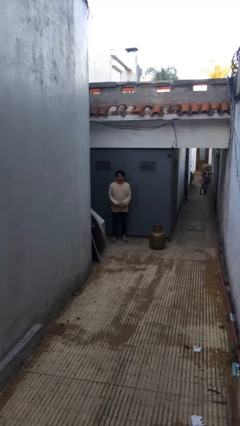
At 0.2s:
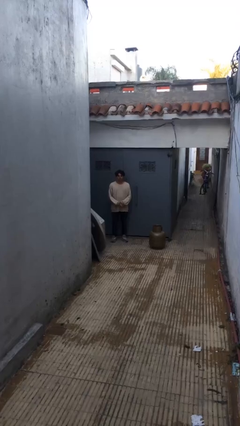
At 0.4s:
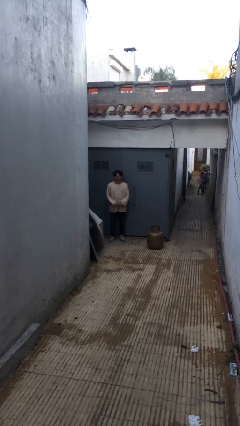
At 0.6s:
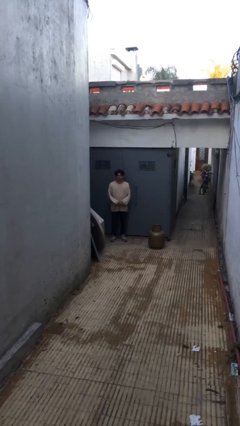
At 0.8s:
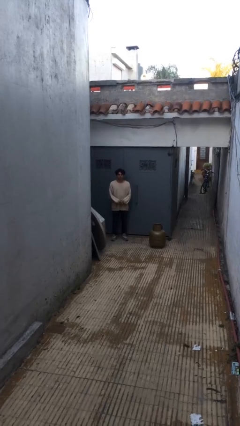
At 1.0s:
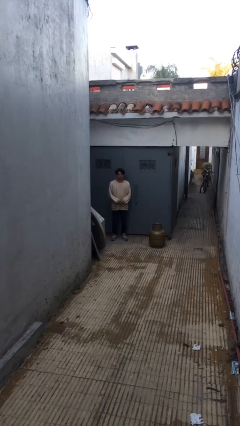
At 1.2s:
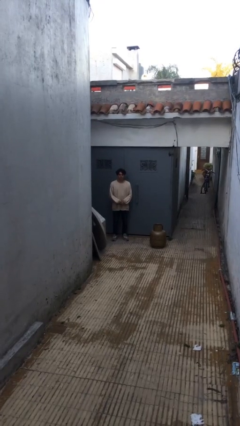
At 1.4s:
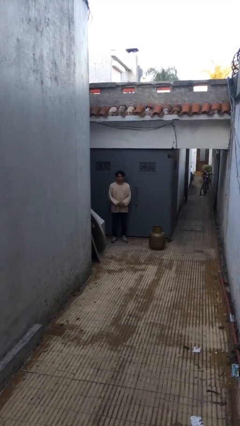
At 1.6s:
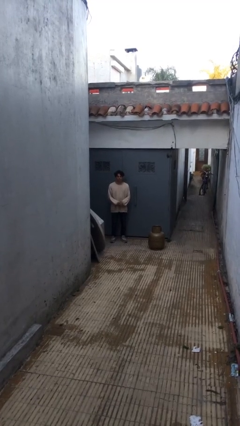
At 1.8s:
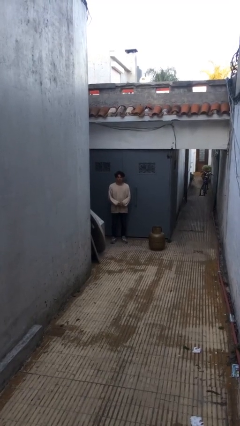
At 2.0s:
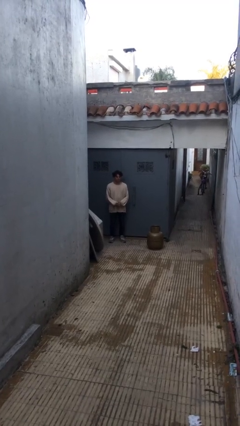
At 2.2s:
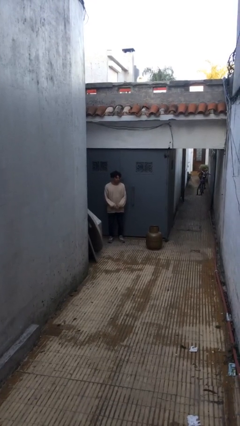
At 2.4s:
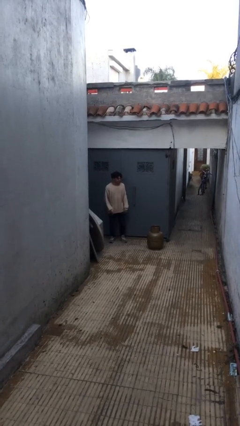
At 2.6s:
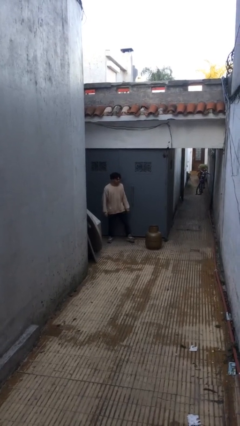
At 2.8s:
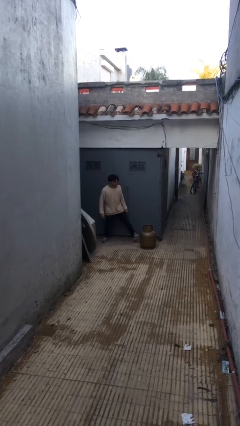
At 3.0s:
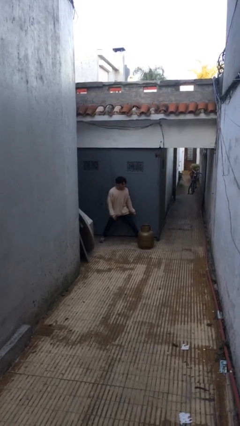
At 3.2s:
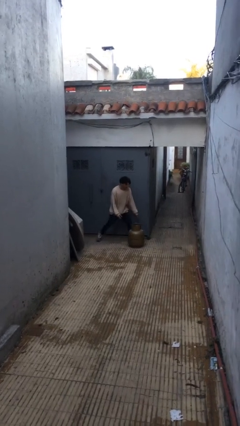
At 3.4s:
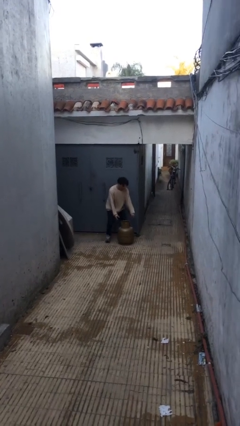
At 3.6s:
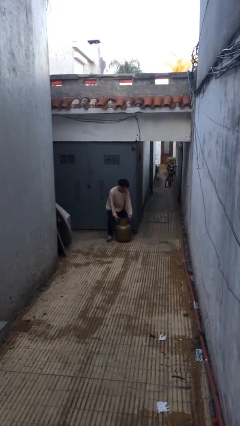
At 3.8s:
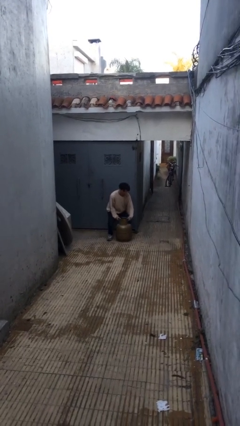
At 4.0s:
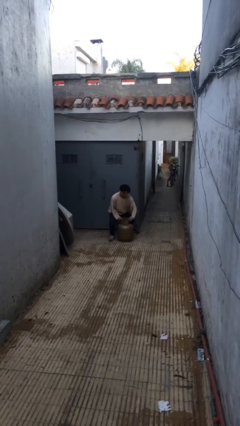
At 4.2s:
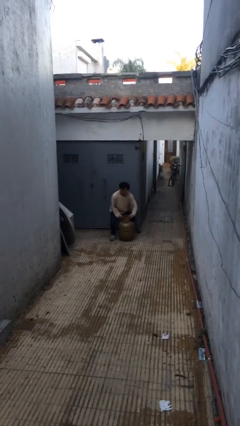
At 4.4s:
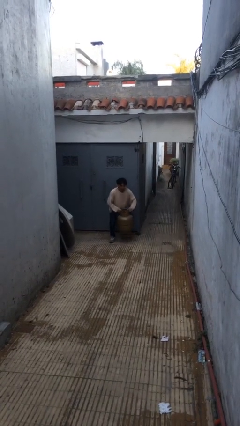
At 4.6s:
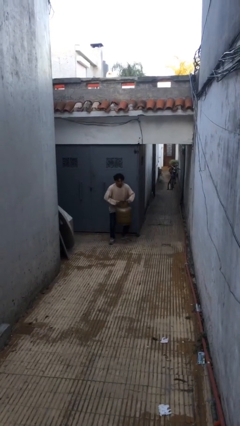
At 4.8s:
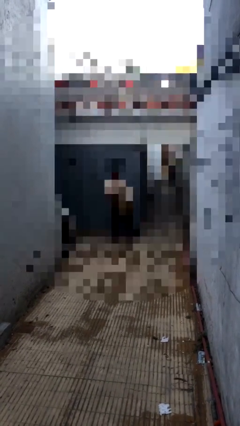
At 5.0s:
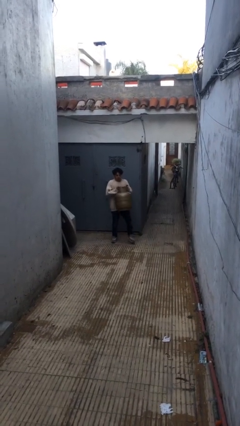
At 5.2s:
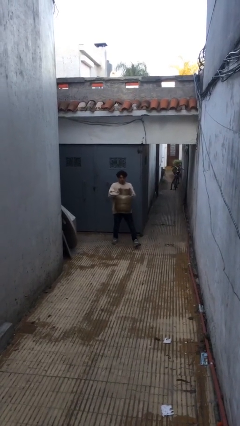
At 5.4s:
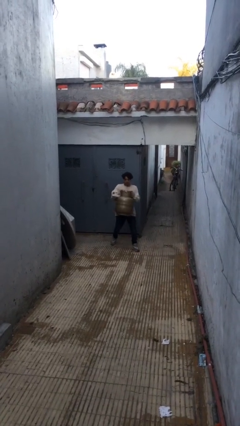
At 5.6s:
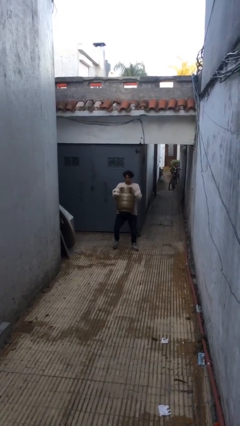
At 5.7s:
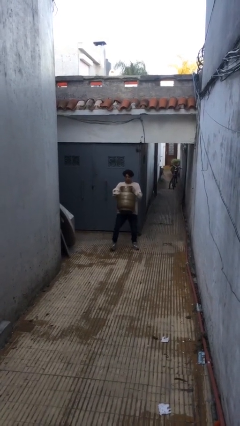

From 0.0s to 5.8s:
person picks up object from floor

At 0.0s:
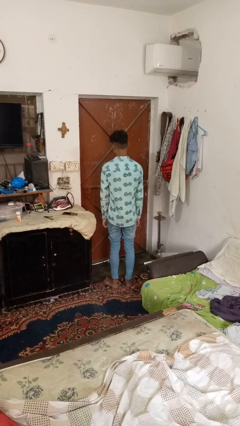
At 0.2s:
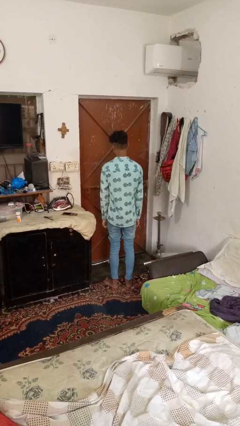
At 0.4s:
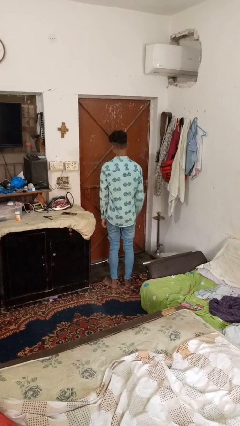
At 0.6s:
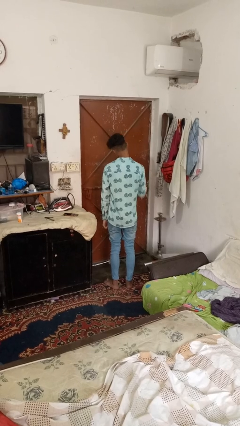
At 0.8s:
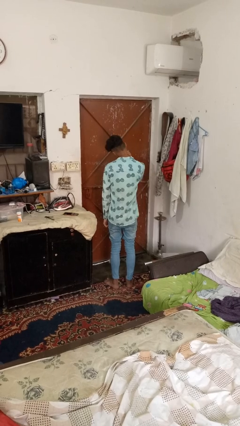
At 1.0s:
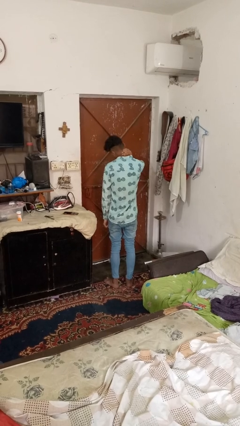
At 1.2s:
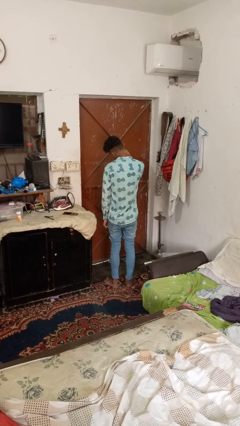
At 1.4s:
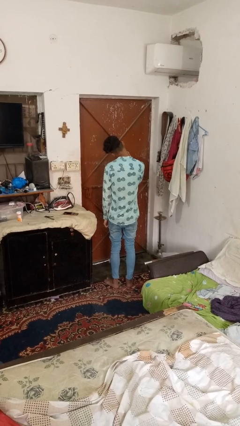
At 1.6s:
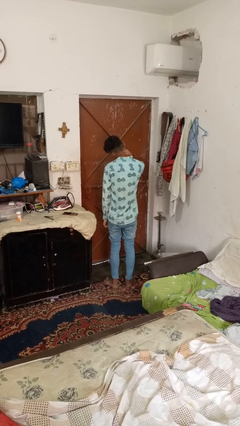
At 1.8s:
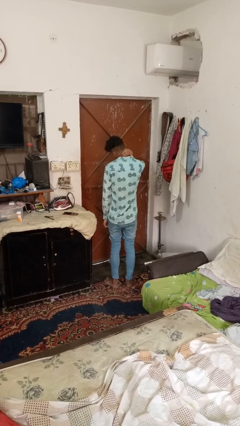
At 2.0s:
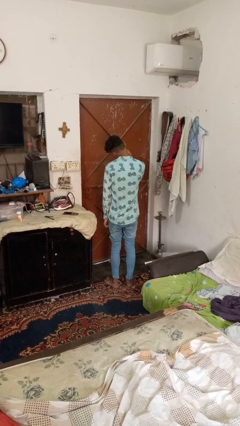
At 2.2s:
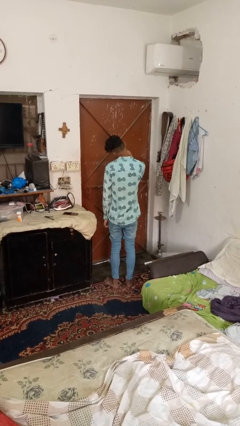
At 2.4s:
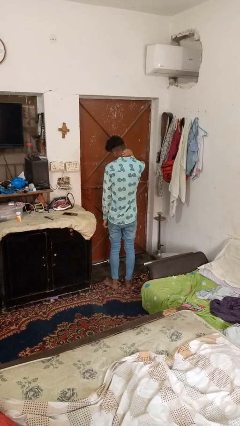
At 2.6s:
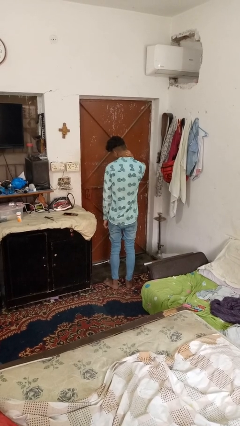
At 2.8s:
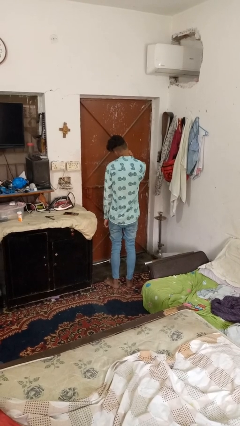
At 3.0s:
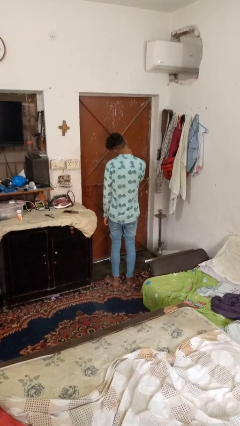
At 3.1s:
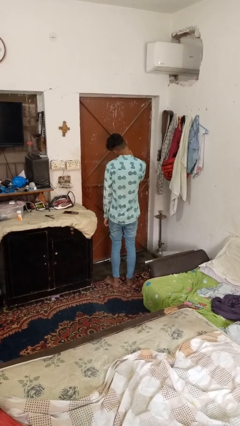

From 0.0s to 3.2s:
person rubs neck

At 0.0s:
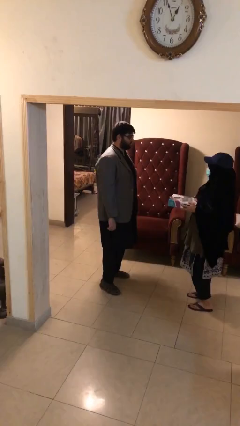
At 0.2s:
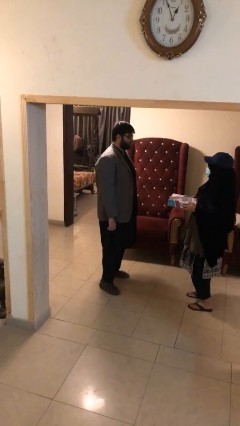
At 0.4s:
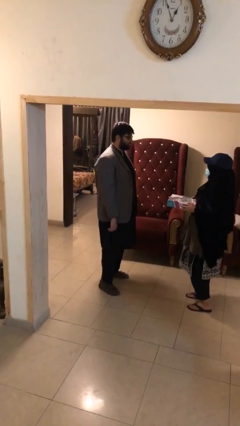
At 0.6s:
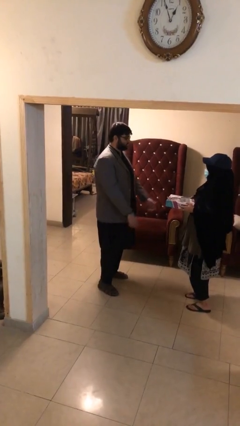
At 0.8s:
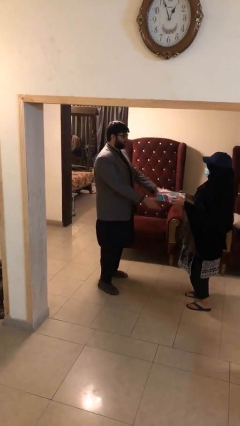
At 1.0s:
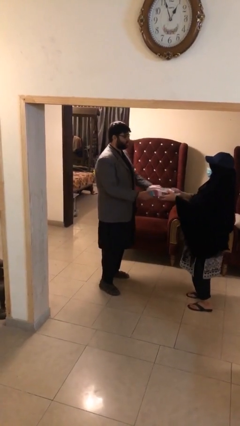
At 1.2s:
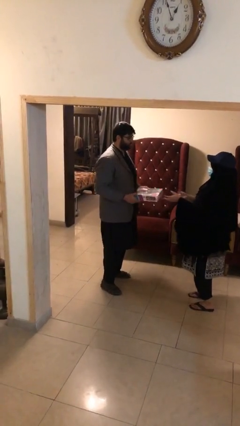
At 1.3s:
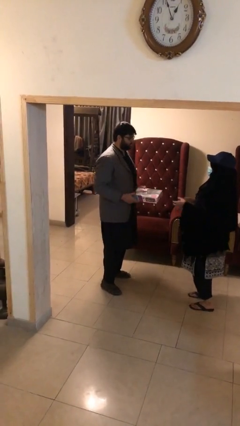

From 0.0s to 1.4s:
person transfers object to person

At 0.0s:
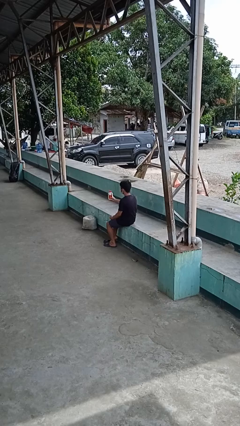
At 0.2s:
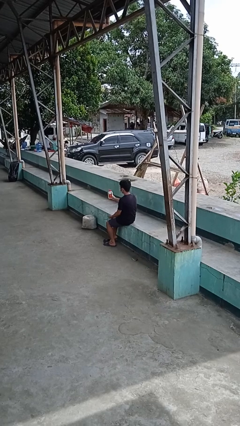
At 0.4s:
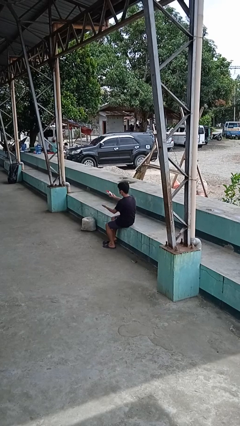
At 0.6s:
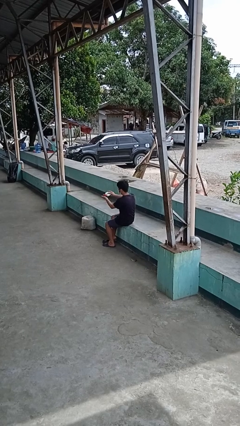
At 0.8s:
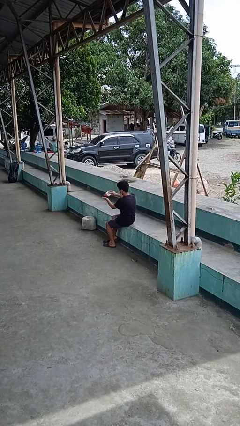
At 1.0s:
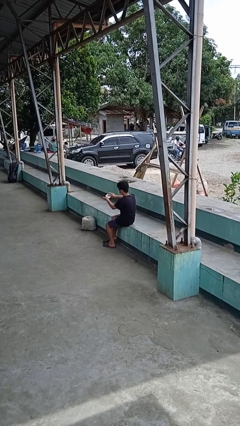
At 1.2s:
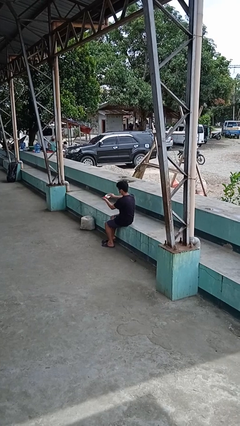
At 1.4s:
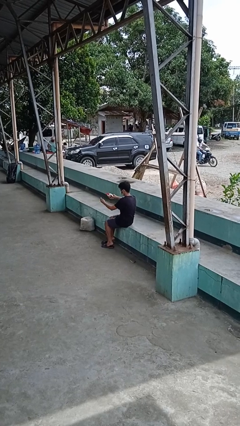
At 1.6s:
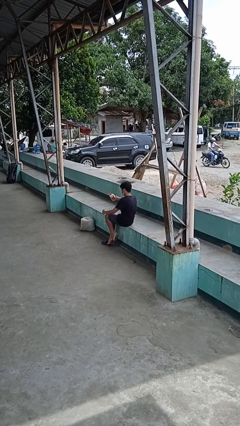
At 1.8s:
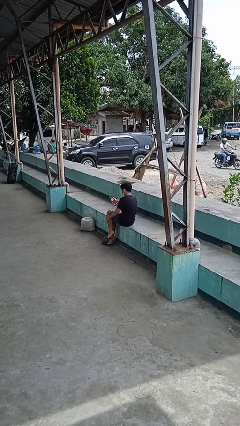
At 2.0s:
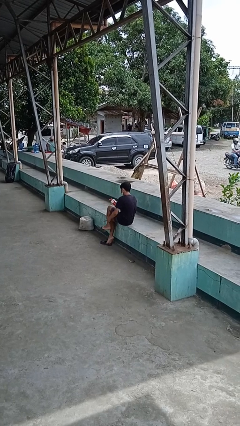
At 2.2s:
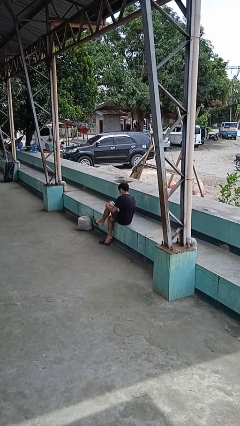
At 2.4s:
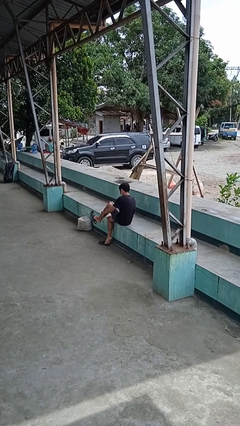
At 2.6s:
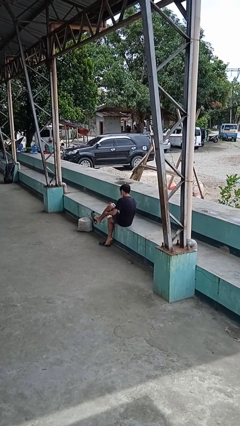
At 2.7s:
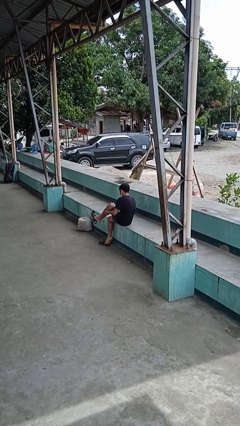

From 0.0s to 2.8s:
person applies sunscreen

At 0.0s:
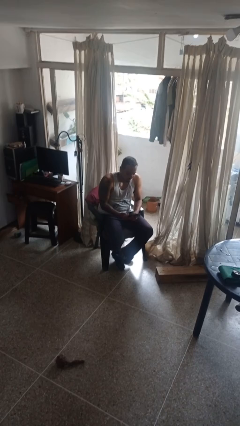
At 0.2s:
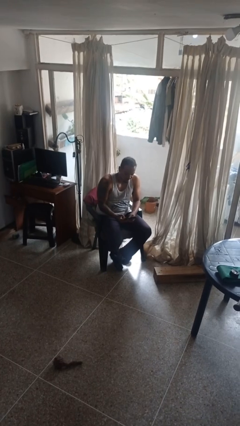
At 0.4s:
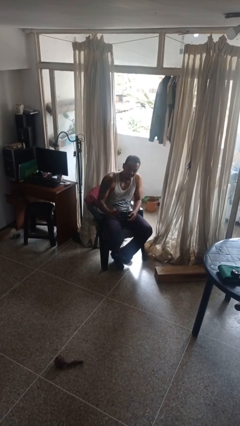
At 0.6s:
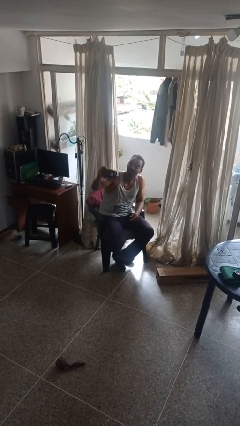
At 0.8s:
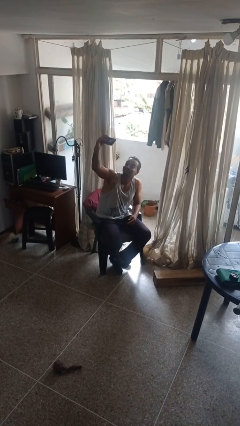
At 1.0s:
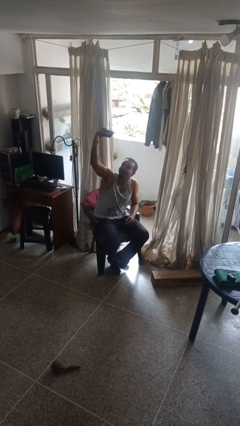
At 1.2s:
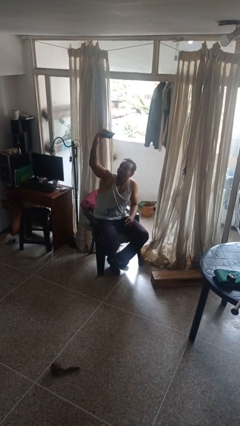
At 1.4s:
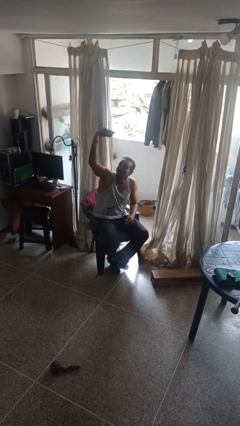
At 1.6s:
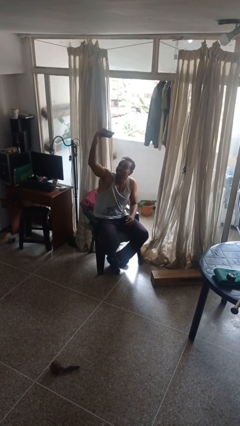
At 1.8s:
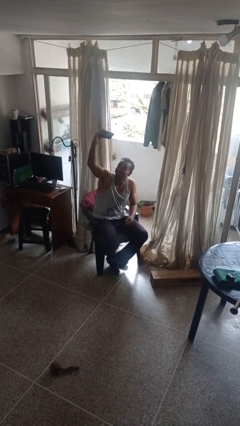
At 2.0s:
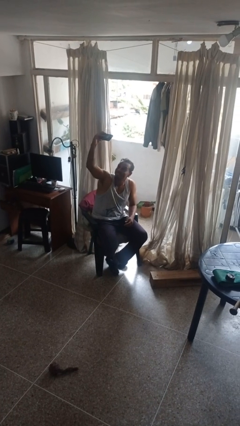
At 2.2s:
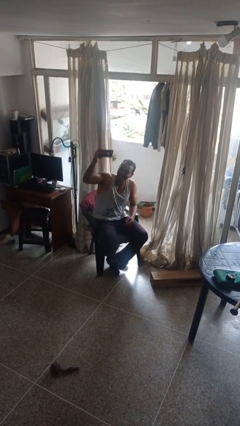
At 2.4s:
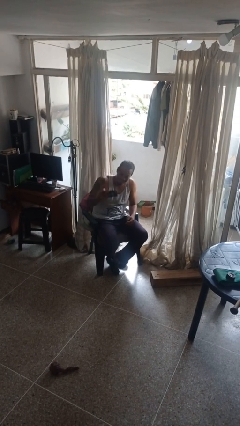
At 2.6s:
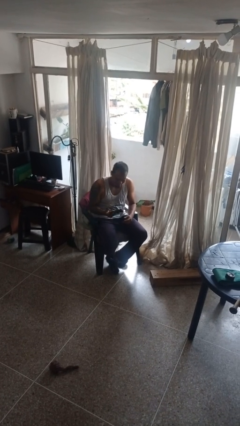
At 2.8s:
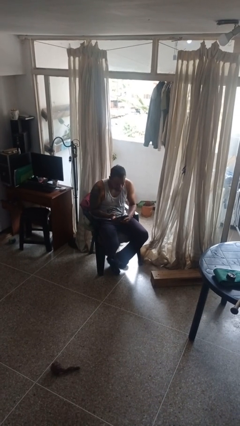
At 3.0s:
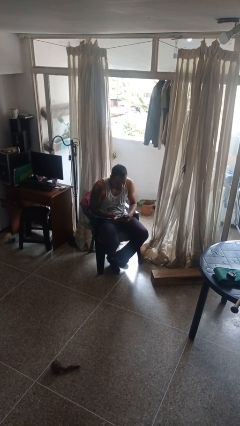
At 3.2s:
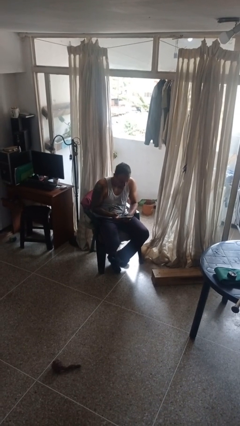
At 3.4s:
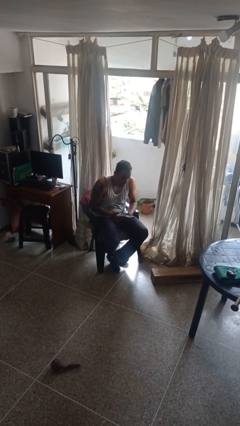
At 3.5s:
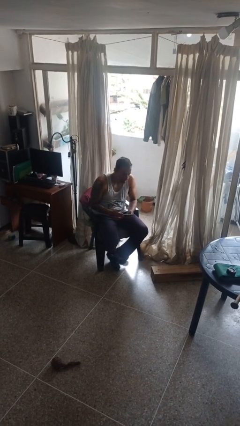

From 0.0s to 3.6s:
person takes selfie

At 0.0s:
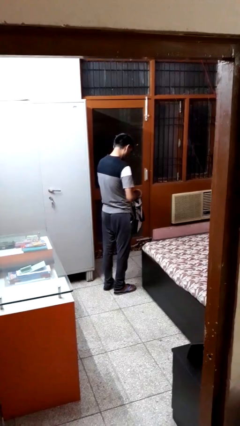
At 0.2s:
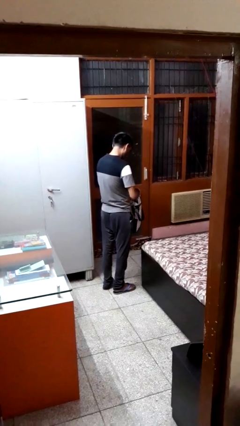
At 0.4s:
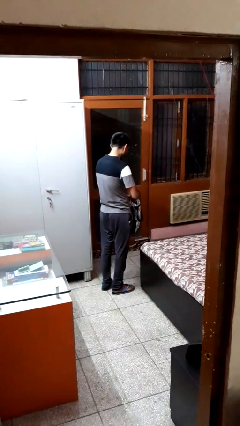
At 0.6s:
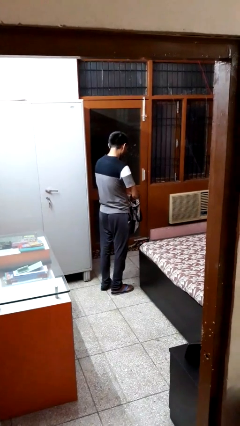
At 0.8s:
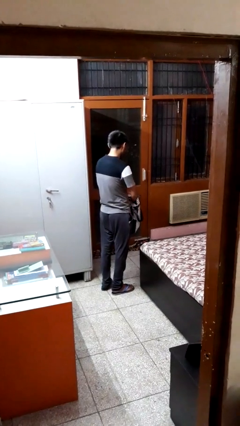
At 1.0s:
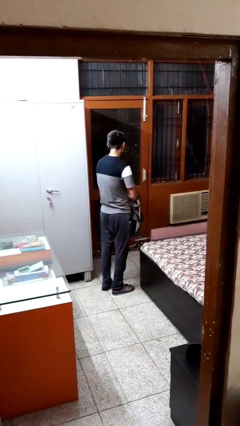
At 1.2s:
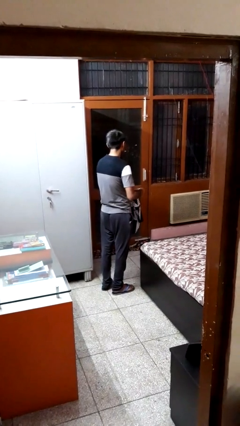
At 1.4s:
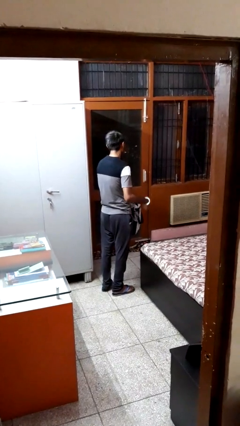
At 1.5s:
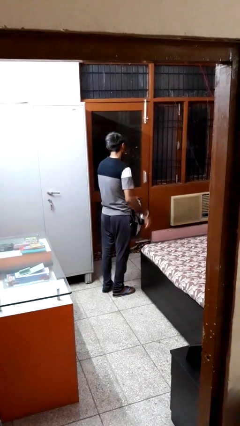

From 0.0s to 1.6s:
person puts object into bag
